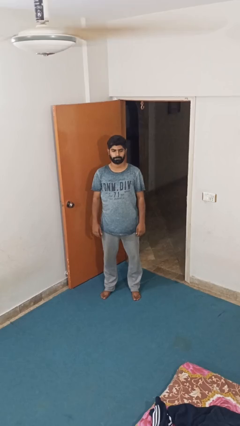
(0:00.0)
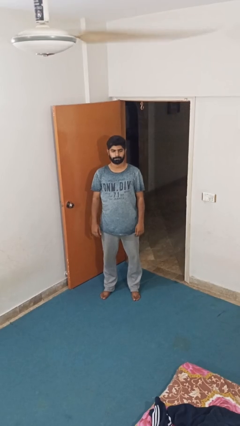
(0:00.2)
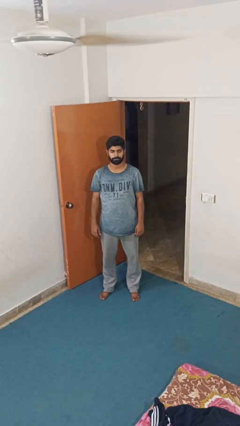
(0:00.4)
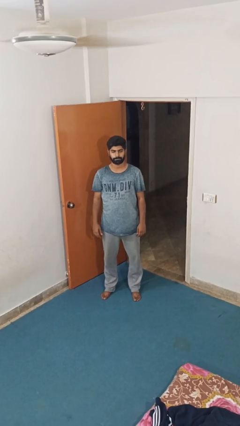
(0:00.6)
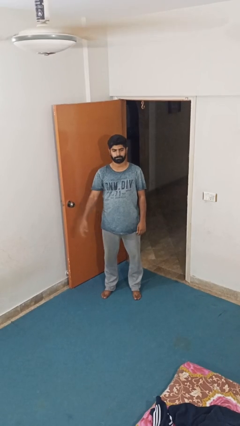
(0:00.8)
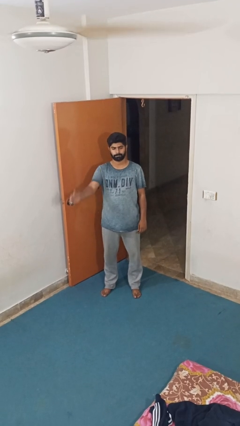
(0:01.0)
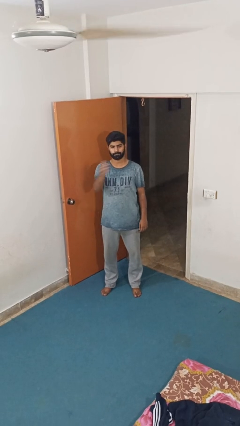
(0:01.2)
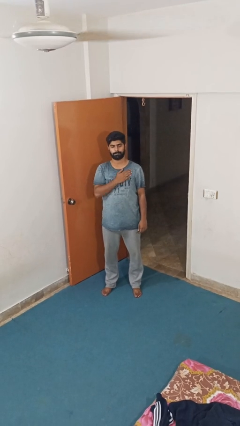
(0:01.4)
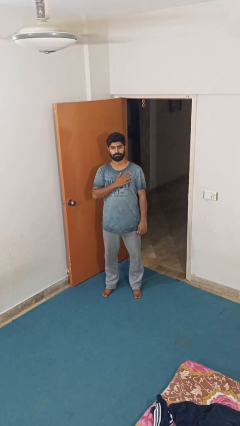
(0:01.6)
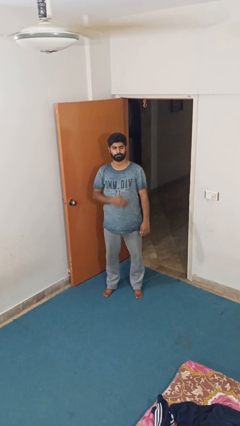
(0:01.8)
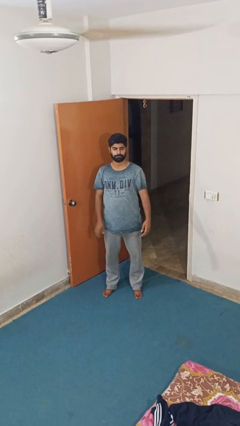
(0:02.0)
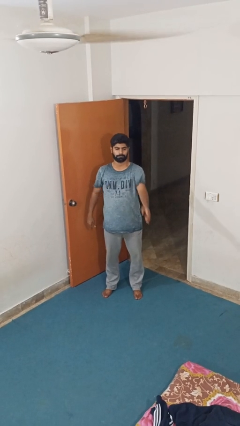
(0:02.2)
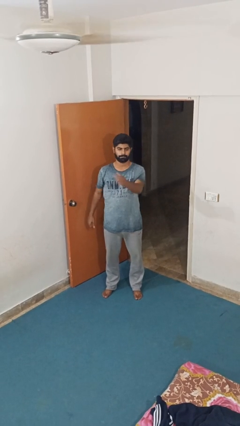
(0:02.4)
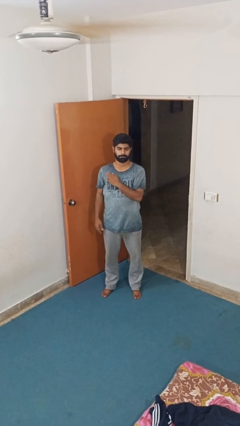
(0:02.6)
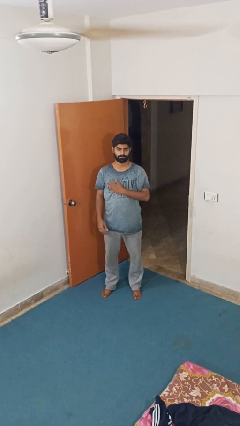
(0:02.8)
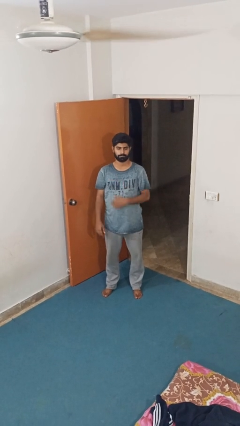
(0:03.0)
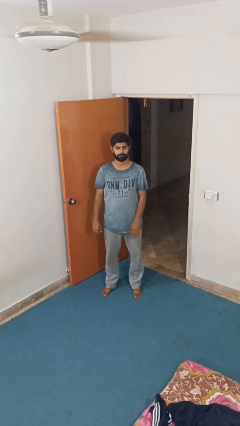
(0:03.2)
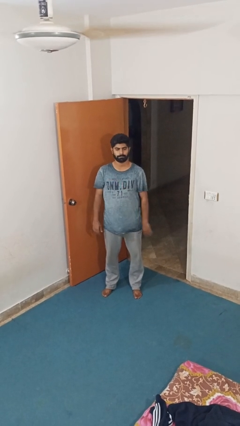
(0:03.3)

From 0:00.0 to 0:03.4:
person drums on chest

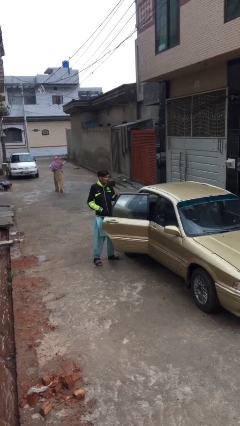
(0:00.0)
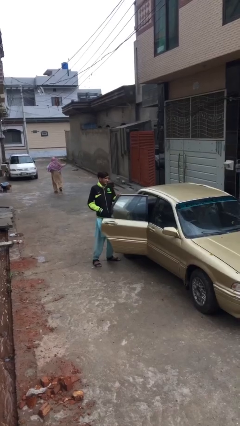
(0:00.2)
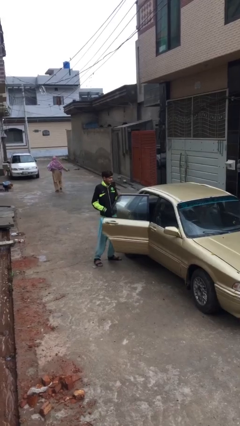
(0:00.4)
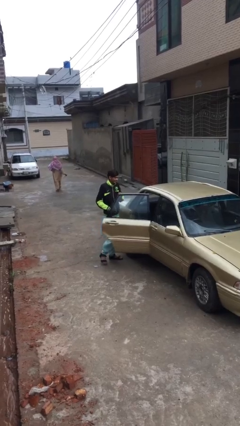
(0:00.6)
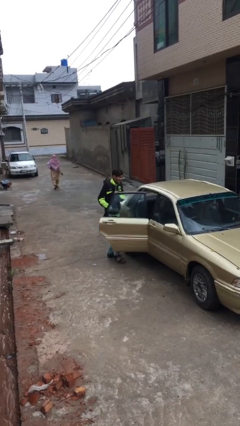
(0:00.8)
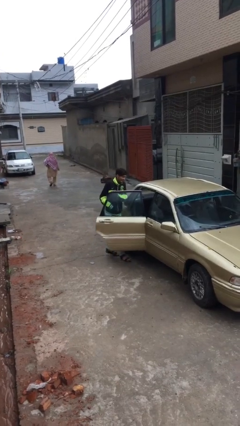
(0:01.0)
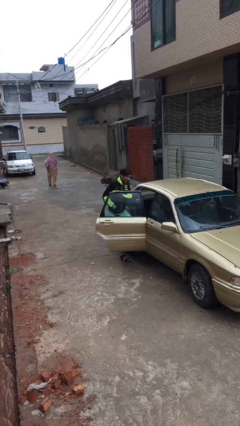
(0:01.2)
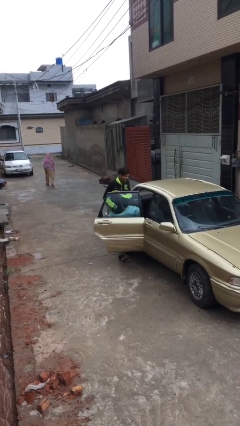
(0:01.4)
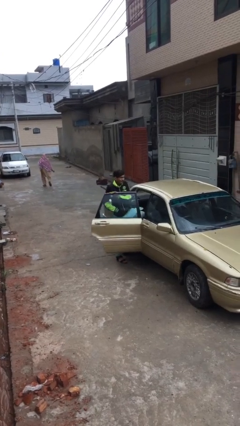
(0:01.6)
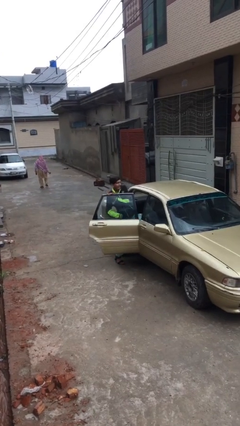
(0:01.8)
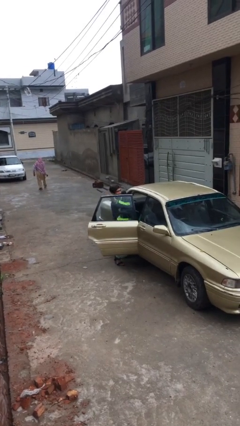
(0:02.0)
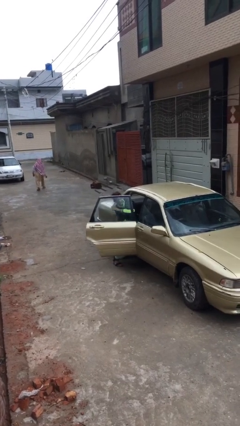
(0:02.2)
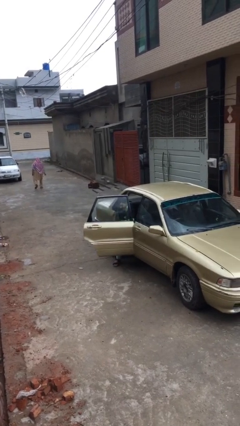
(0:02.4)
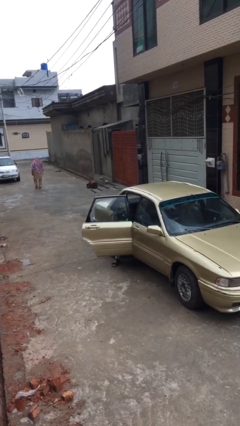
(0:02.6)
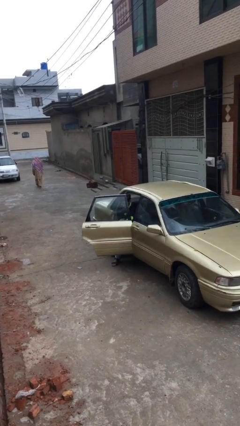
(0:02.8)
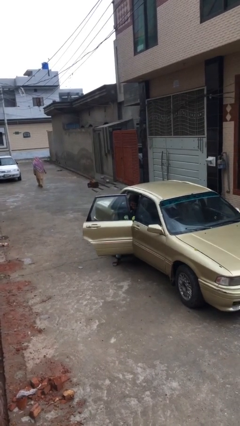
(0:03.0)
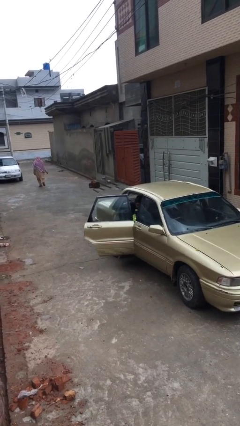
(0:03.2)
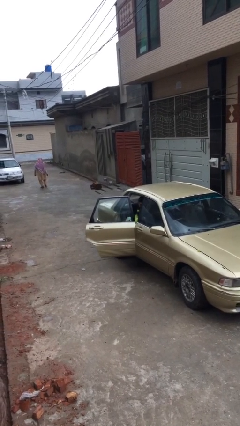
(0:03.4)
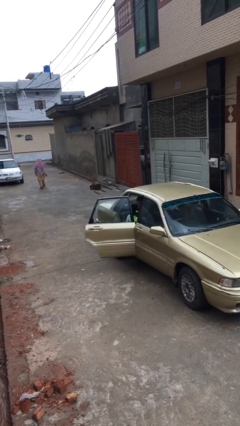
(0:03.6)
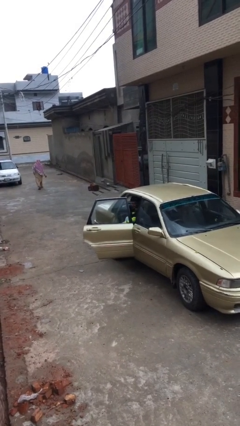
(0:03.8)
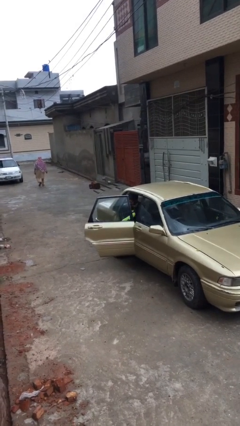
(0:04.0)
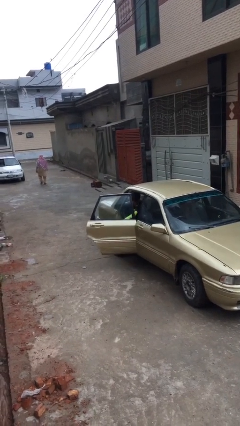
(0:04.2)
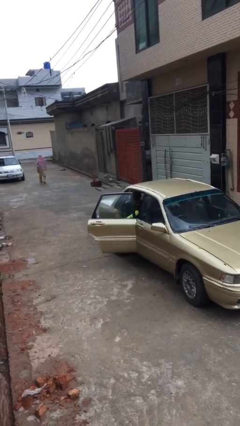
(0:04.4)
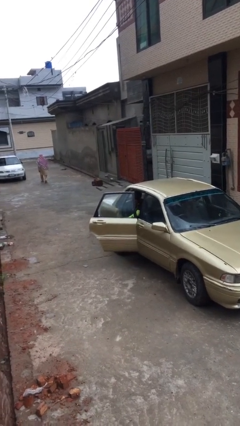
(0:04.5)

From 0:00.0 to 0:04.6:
person enters car

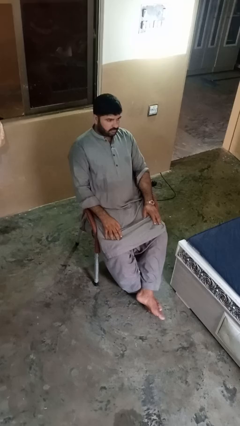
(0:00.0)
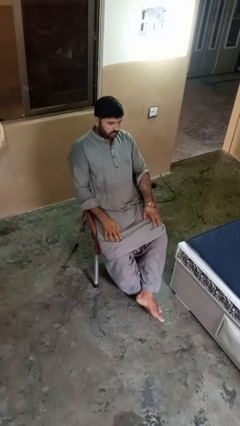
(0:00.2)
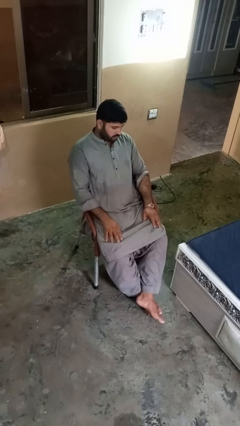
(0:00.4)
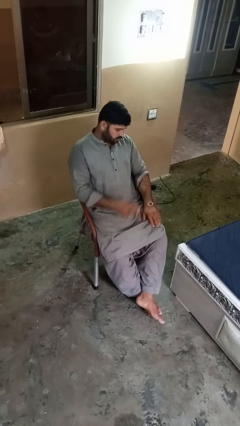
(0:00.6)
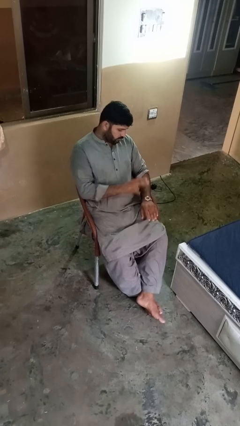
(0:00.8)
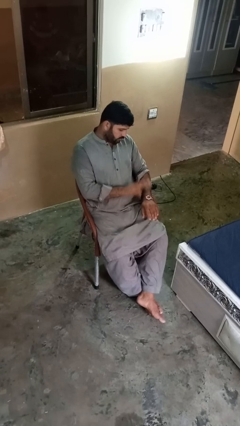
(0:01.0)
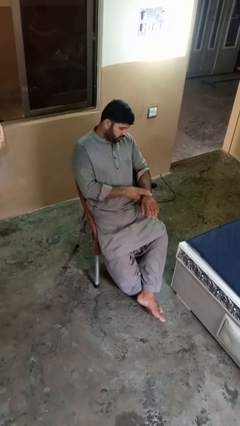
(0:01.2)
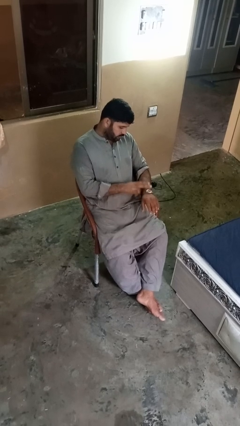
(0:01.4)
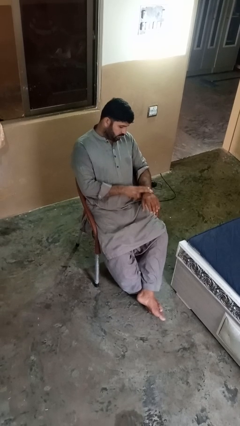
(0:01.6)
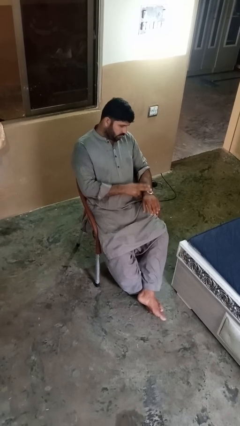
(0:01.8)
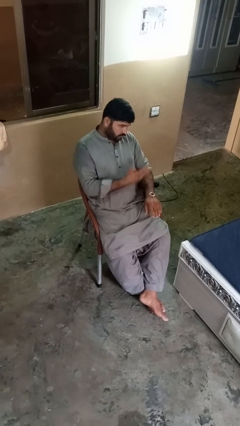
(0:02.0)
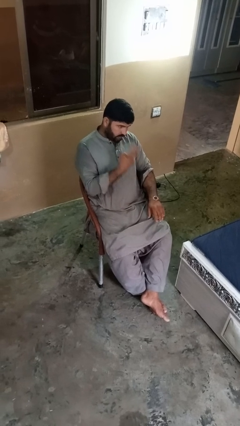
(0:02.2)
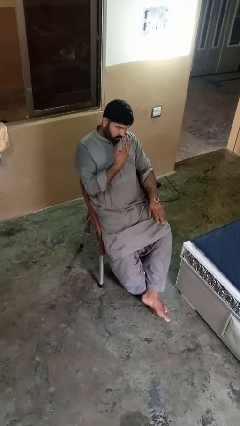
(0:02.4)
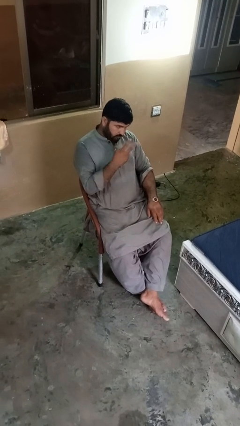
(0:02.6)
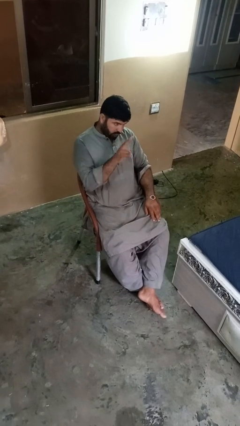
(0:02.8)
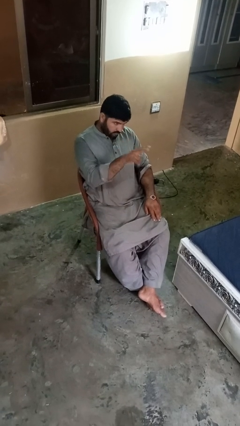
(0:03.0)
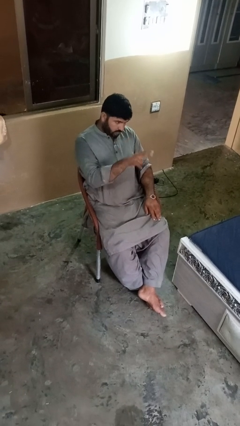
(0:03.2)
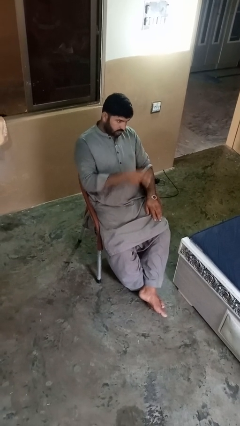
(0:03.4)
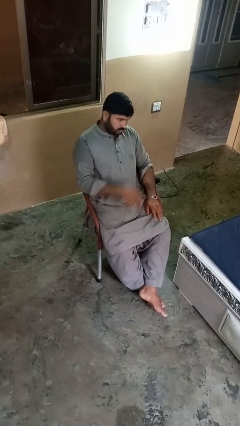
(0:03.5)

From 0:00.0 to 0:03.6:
person gestures watch closely

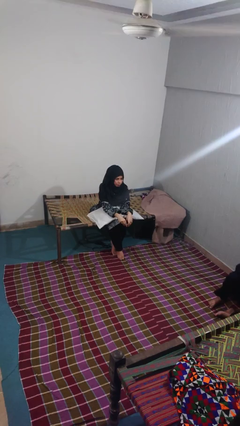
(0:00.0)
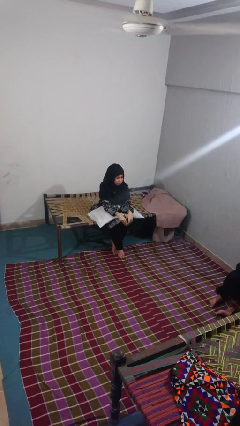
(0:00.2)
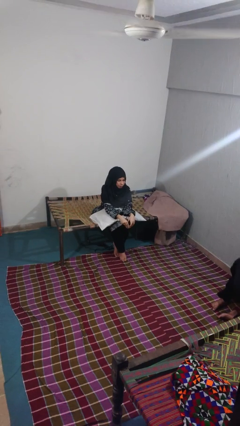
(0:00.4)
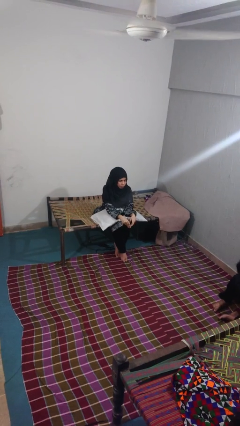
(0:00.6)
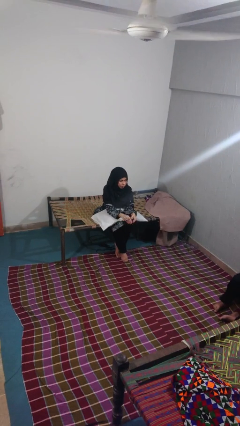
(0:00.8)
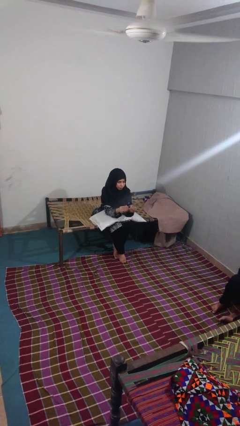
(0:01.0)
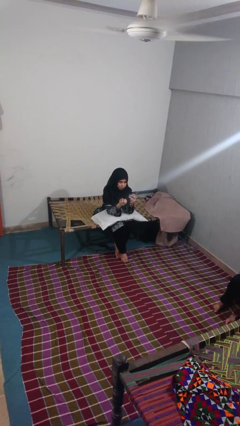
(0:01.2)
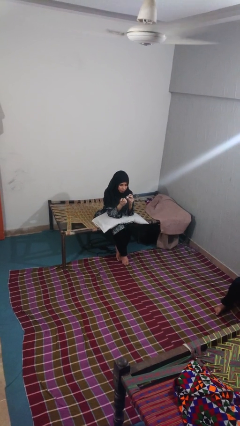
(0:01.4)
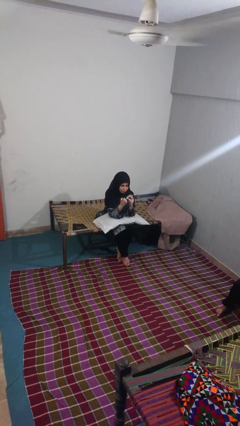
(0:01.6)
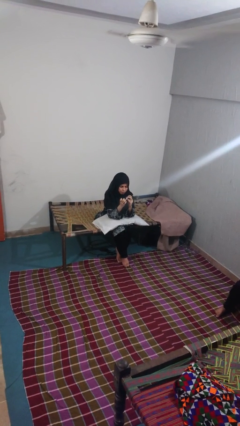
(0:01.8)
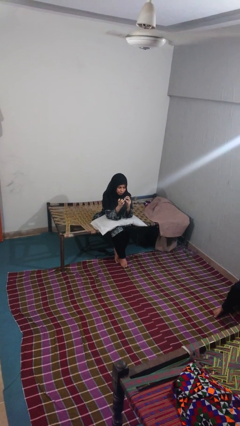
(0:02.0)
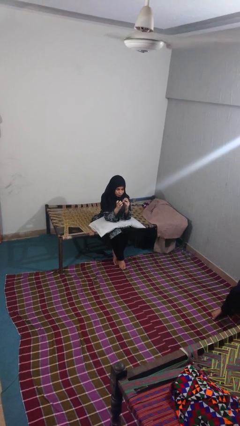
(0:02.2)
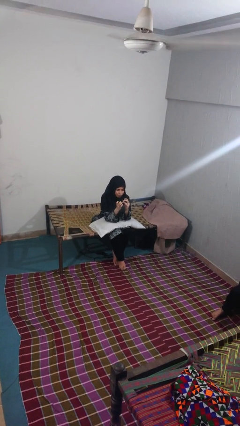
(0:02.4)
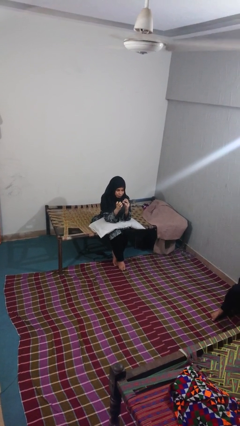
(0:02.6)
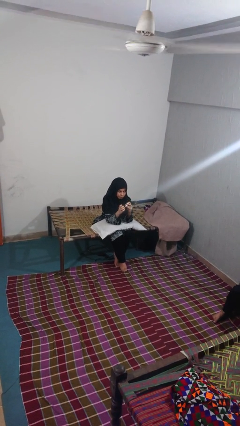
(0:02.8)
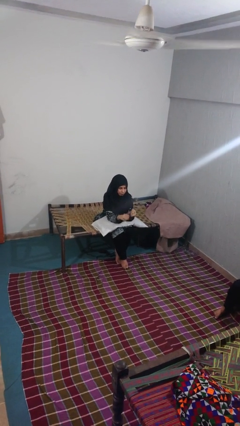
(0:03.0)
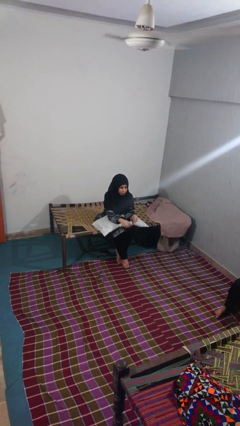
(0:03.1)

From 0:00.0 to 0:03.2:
person clips fingernails

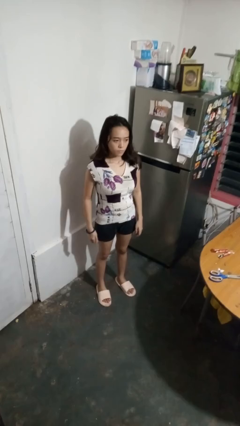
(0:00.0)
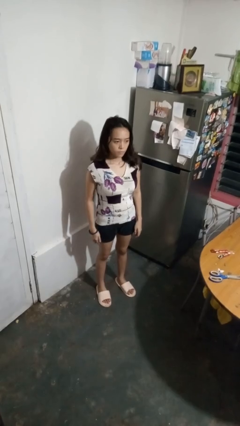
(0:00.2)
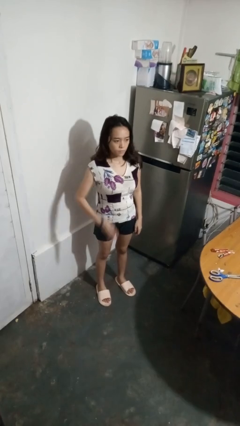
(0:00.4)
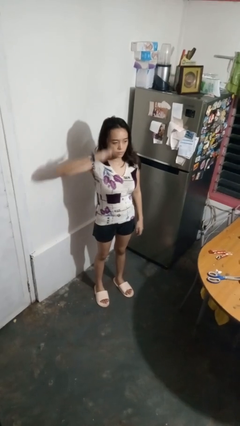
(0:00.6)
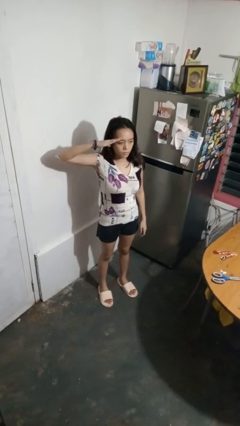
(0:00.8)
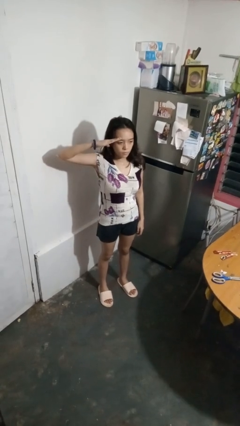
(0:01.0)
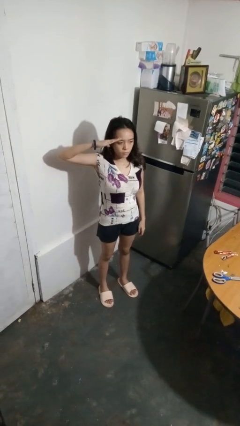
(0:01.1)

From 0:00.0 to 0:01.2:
person salutes

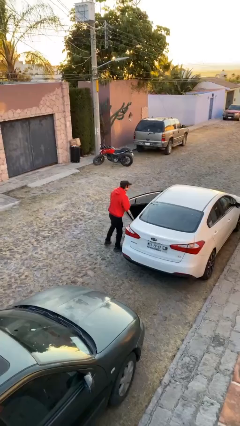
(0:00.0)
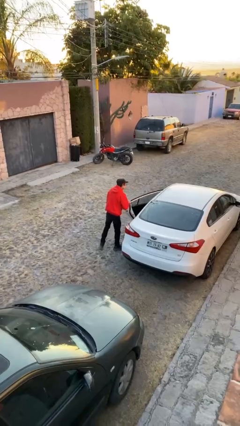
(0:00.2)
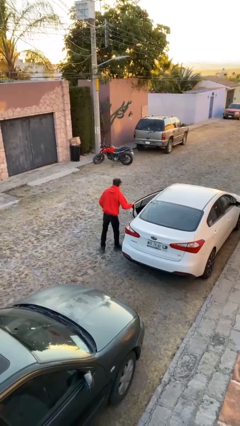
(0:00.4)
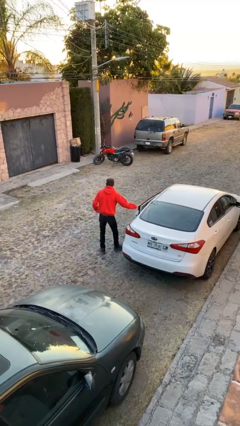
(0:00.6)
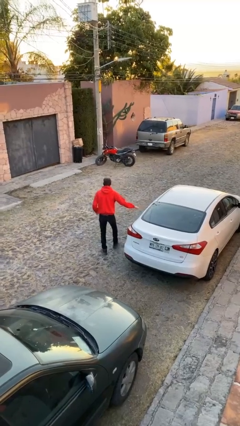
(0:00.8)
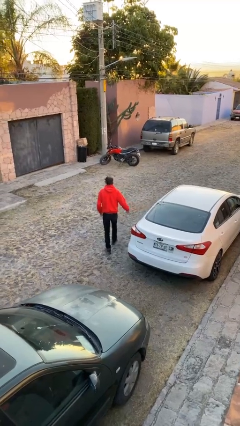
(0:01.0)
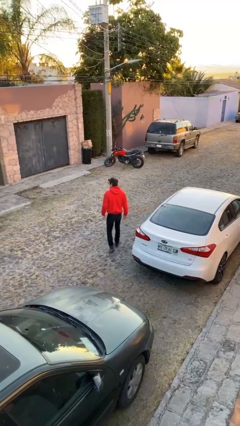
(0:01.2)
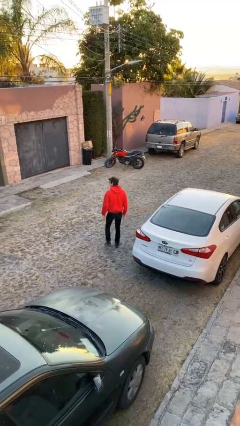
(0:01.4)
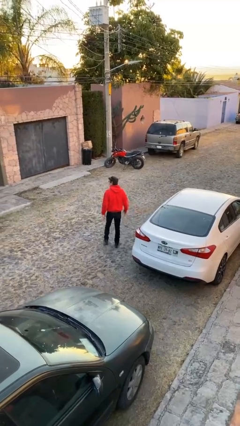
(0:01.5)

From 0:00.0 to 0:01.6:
person closes facility door
